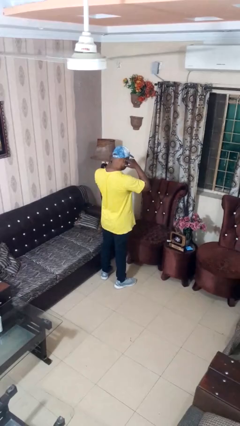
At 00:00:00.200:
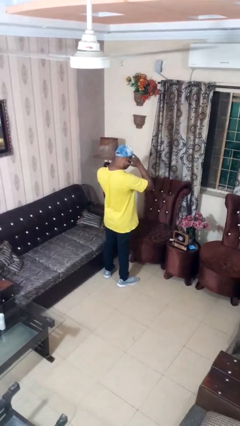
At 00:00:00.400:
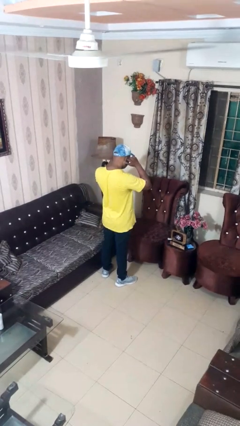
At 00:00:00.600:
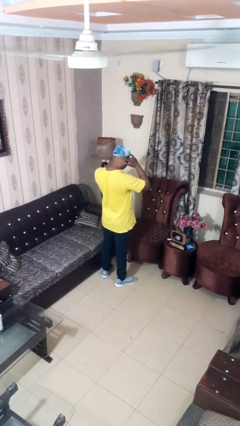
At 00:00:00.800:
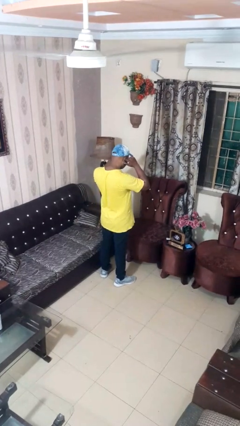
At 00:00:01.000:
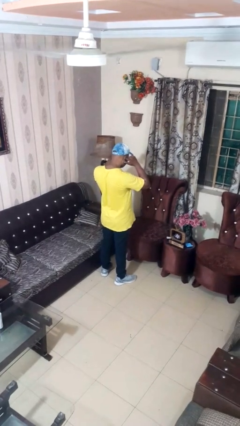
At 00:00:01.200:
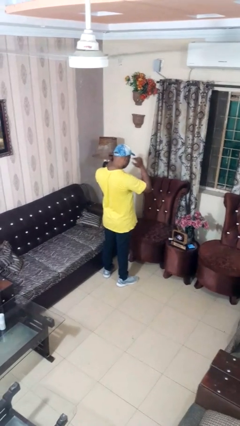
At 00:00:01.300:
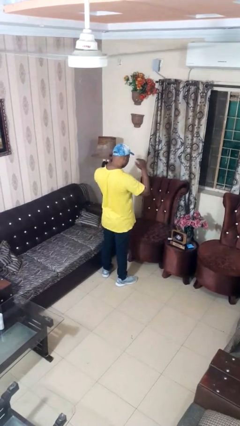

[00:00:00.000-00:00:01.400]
person puts fingers in ear

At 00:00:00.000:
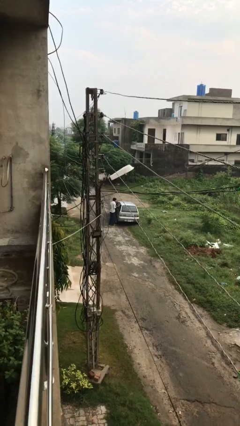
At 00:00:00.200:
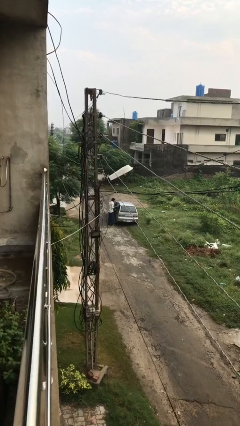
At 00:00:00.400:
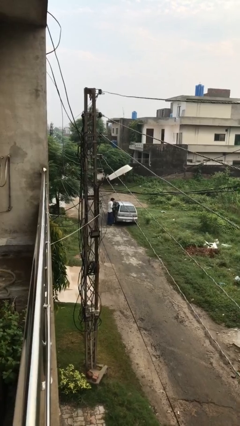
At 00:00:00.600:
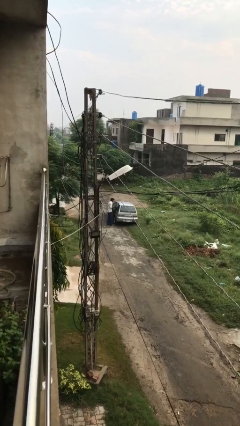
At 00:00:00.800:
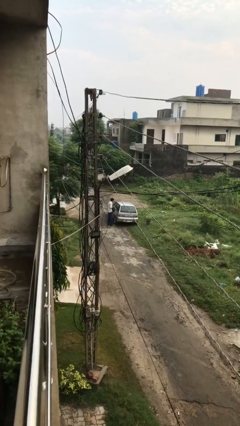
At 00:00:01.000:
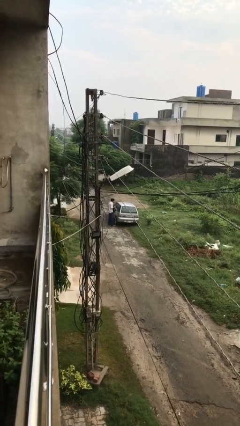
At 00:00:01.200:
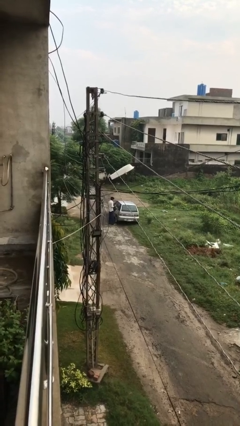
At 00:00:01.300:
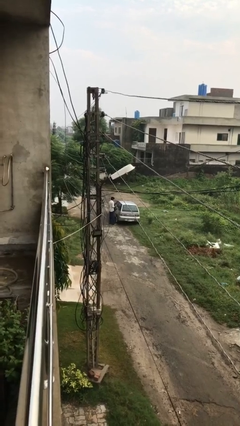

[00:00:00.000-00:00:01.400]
person closes car door

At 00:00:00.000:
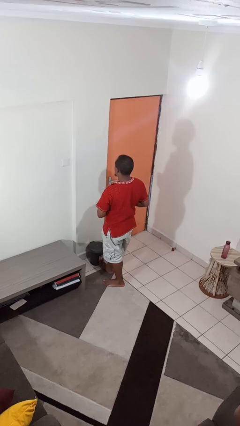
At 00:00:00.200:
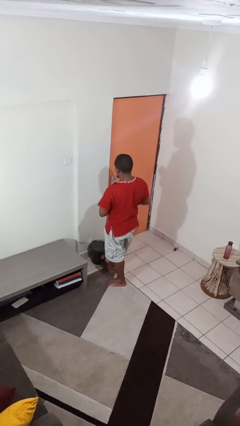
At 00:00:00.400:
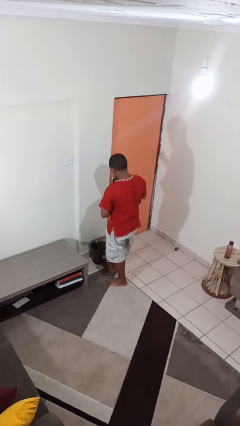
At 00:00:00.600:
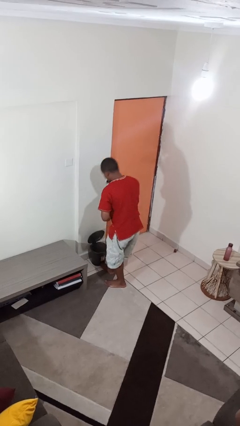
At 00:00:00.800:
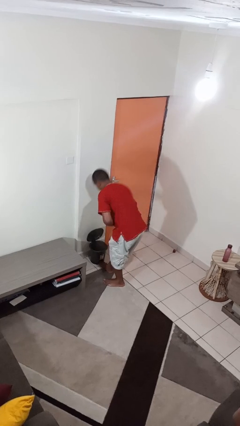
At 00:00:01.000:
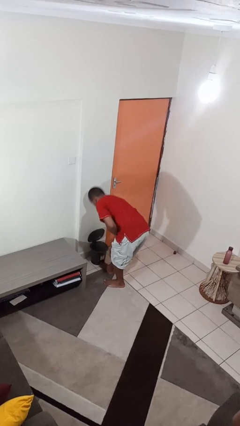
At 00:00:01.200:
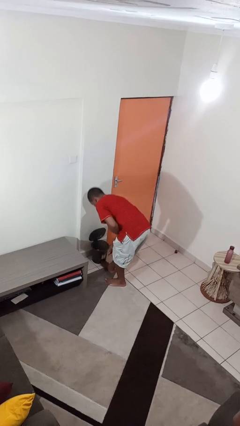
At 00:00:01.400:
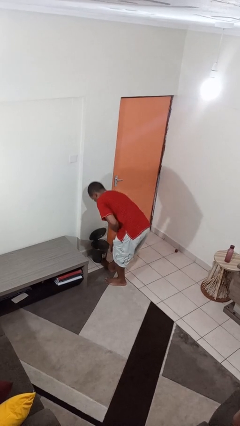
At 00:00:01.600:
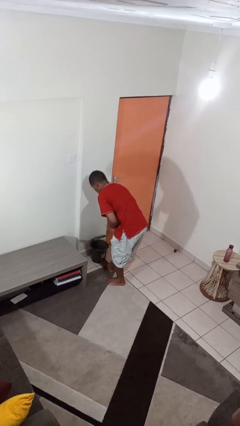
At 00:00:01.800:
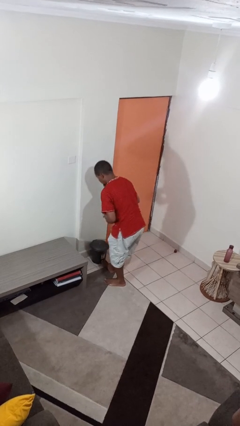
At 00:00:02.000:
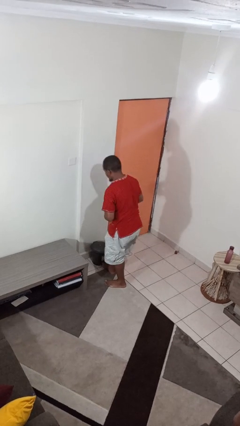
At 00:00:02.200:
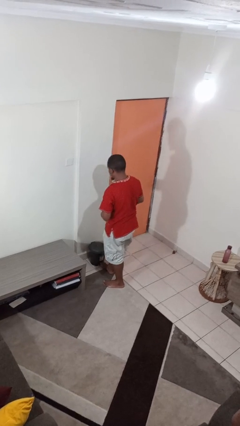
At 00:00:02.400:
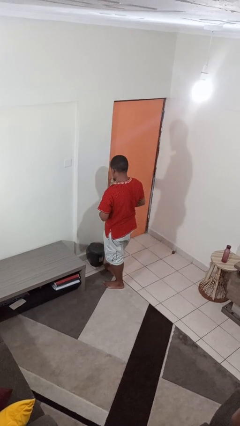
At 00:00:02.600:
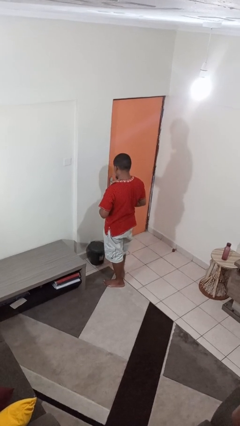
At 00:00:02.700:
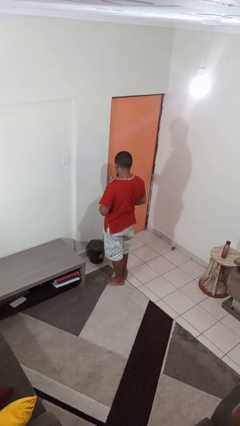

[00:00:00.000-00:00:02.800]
person discards trash

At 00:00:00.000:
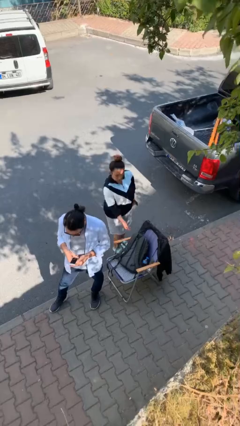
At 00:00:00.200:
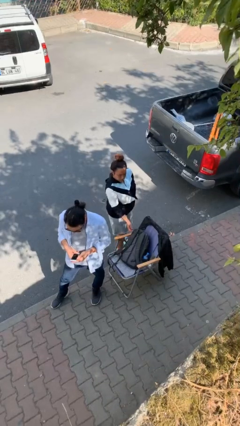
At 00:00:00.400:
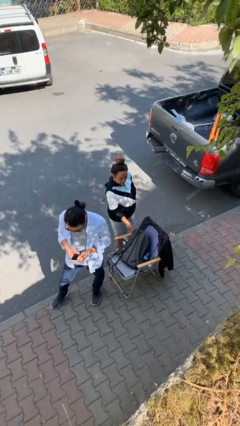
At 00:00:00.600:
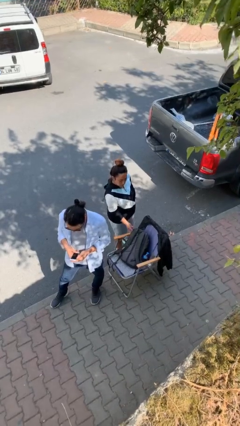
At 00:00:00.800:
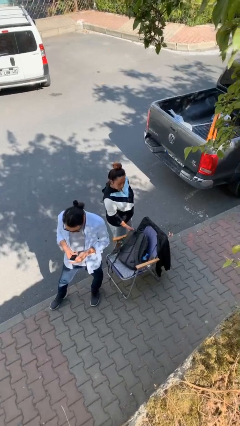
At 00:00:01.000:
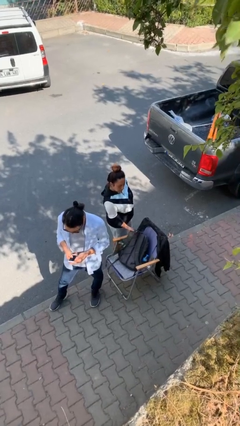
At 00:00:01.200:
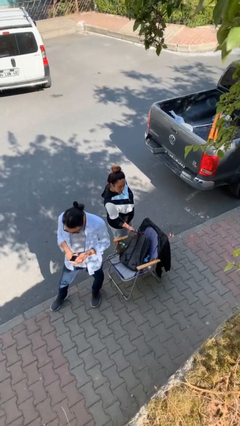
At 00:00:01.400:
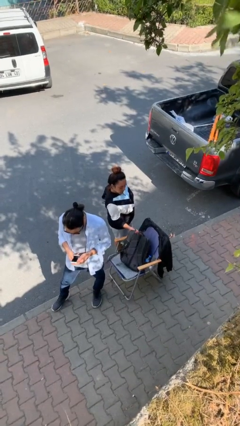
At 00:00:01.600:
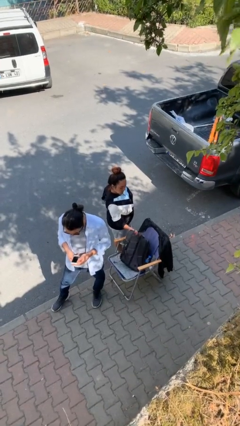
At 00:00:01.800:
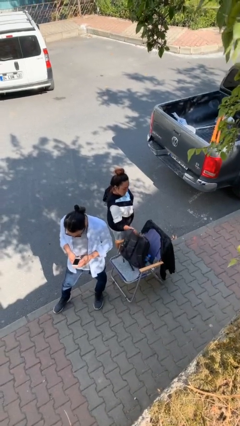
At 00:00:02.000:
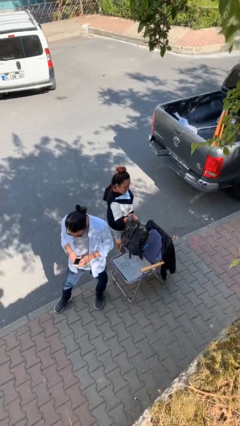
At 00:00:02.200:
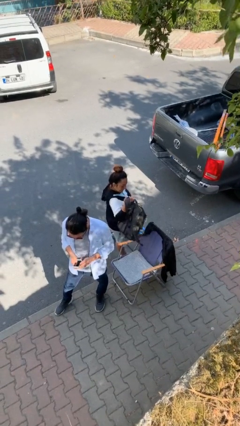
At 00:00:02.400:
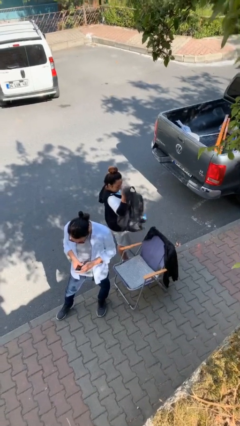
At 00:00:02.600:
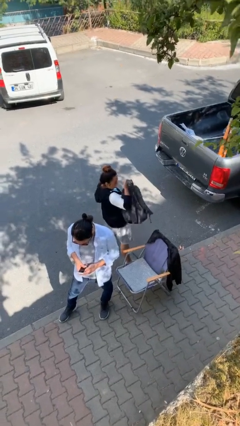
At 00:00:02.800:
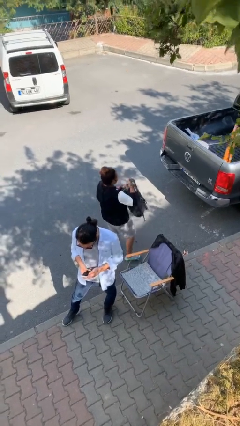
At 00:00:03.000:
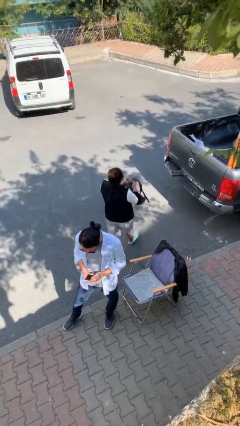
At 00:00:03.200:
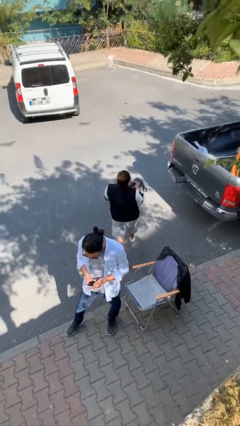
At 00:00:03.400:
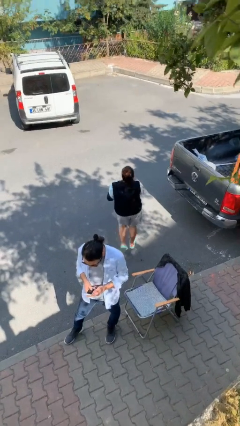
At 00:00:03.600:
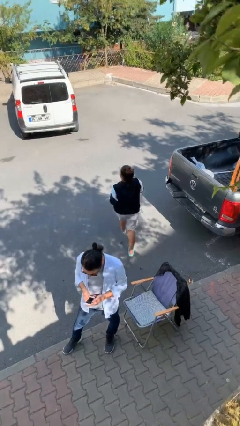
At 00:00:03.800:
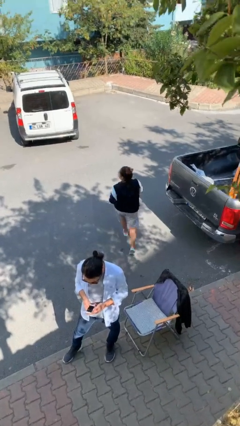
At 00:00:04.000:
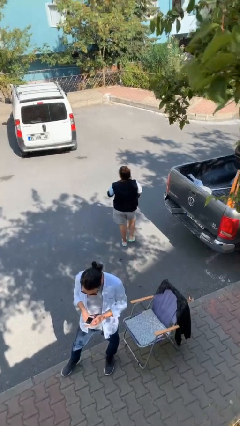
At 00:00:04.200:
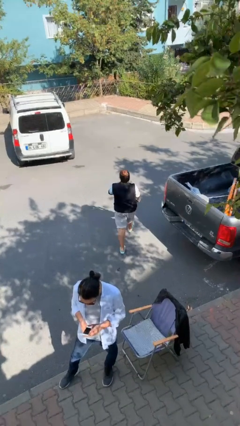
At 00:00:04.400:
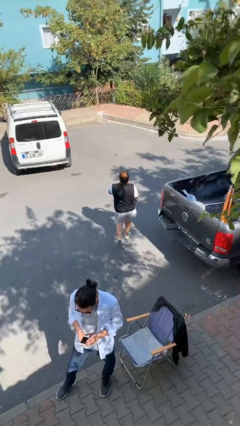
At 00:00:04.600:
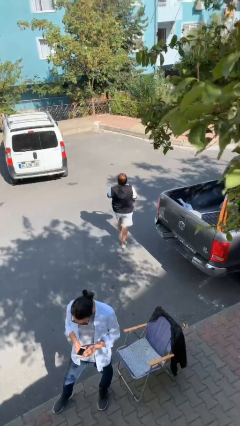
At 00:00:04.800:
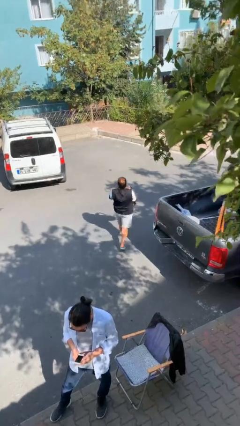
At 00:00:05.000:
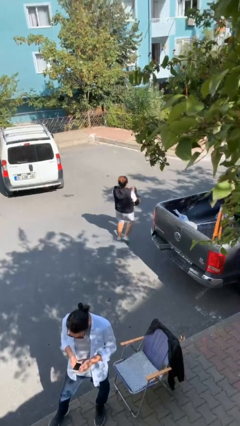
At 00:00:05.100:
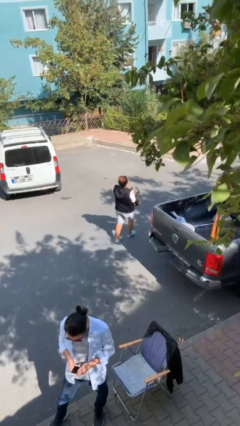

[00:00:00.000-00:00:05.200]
person steals object from person

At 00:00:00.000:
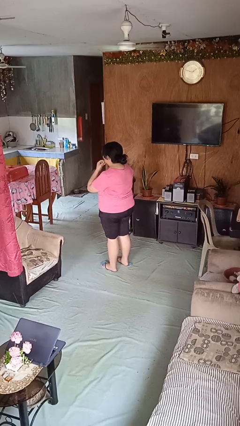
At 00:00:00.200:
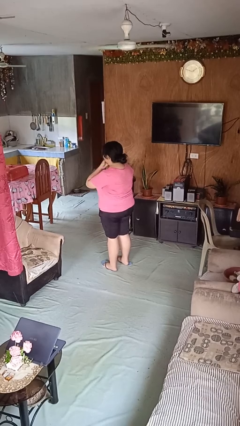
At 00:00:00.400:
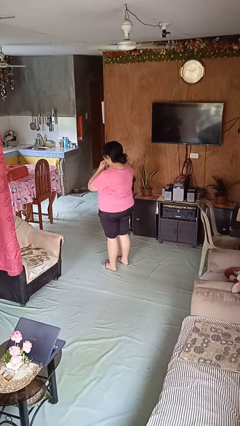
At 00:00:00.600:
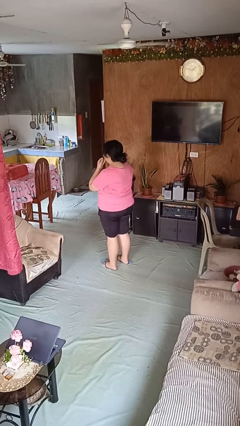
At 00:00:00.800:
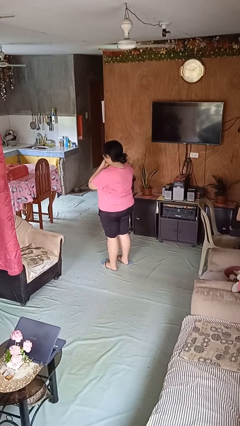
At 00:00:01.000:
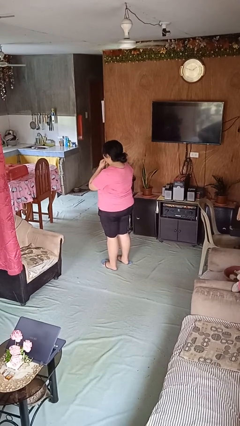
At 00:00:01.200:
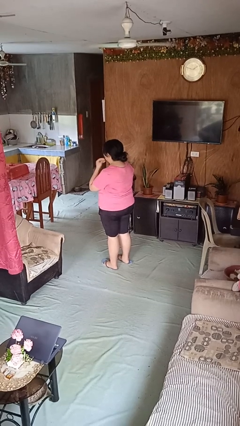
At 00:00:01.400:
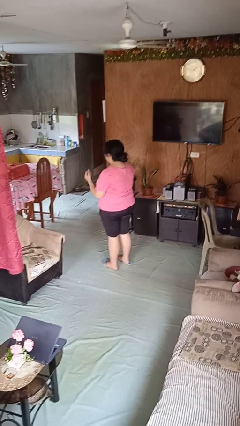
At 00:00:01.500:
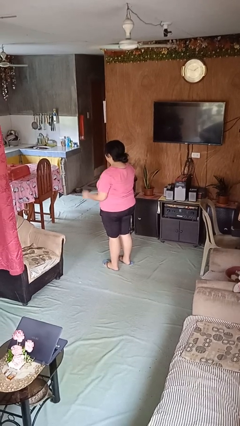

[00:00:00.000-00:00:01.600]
person strokes chin

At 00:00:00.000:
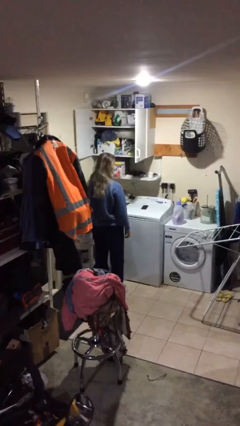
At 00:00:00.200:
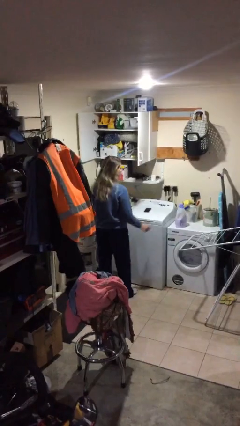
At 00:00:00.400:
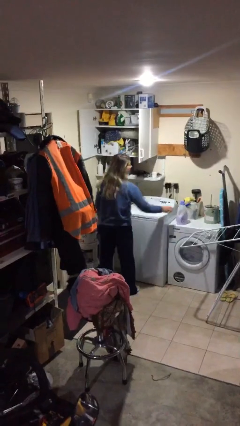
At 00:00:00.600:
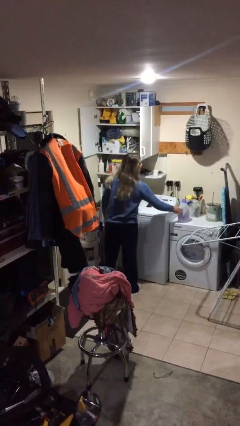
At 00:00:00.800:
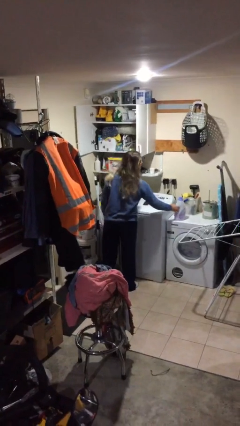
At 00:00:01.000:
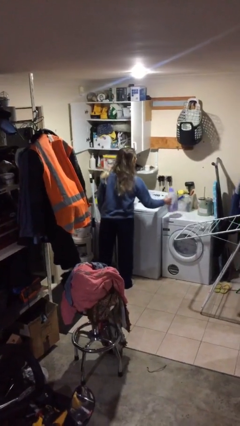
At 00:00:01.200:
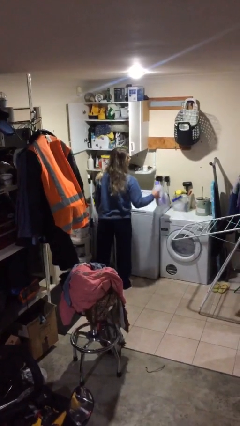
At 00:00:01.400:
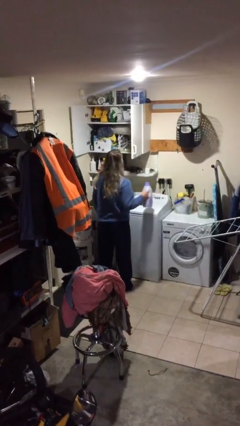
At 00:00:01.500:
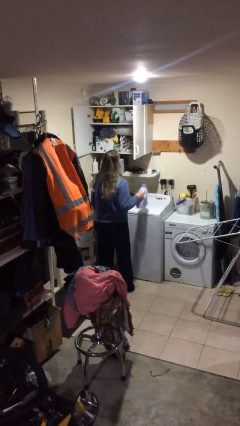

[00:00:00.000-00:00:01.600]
person picks up object from table

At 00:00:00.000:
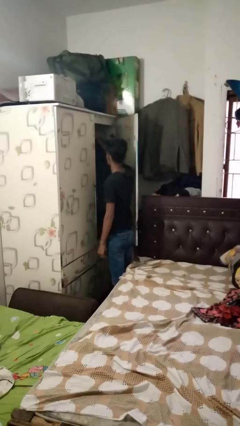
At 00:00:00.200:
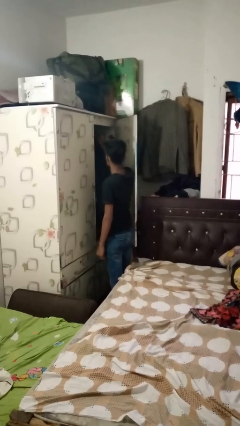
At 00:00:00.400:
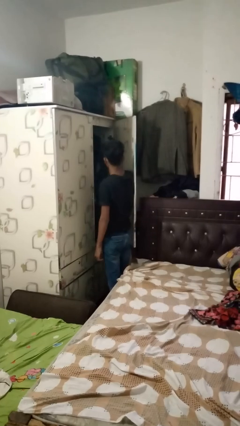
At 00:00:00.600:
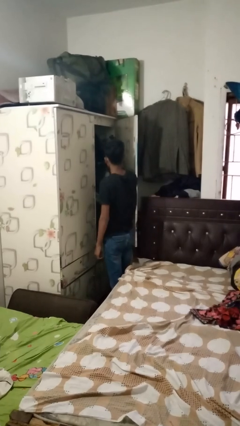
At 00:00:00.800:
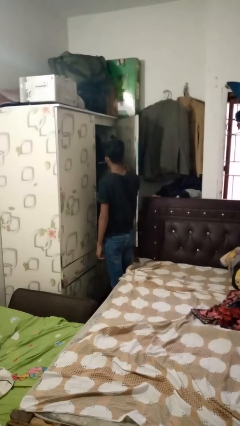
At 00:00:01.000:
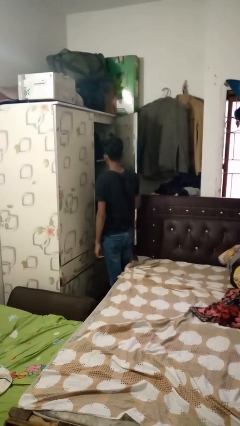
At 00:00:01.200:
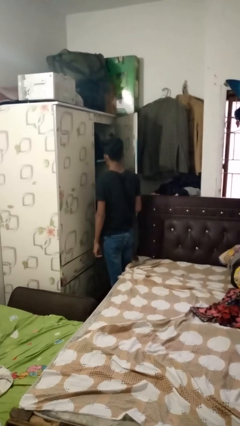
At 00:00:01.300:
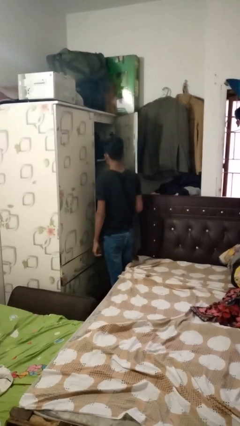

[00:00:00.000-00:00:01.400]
person takes clothes from closet

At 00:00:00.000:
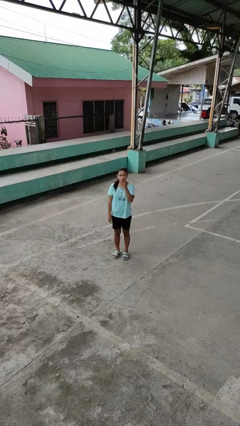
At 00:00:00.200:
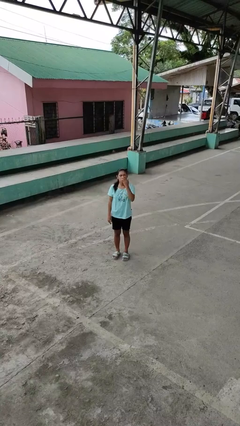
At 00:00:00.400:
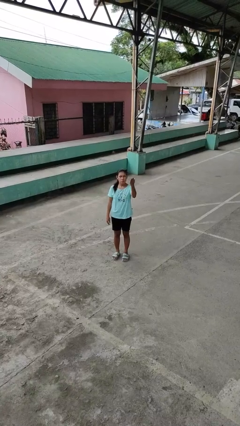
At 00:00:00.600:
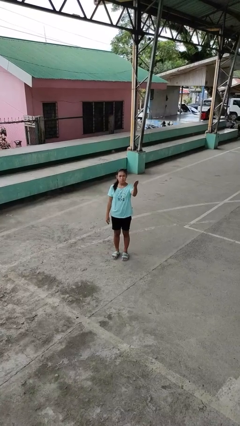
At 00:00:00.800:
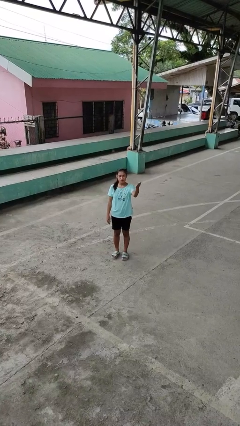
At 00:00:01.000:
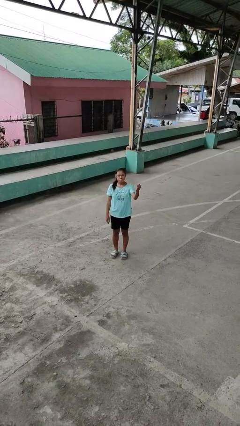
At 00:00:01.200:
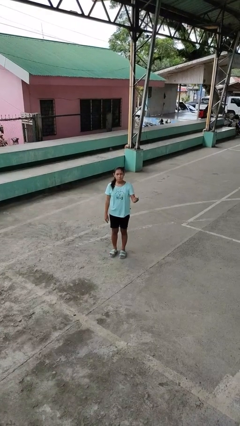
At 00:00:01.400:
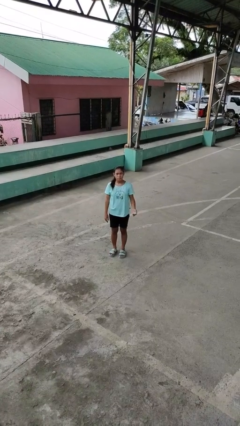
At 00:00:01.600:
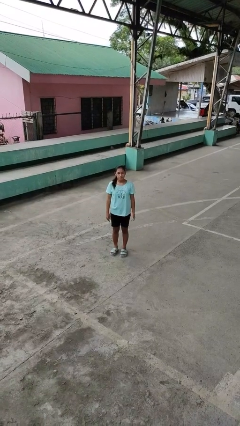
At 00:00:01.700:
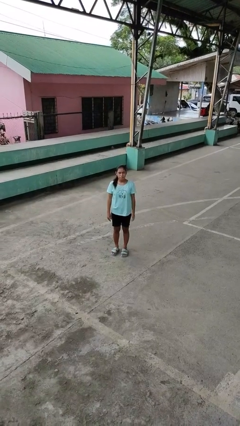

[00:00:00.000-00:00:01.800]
person gestures blow kiss
